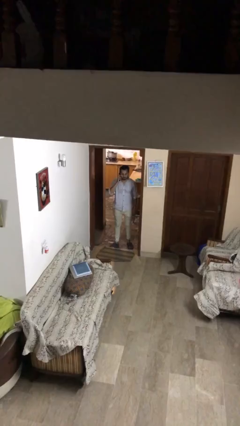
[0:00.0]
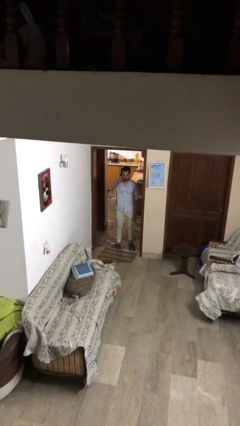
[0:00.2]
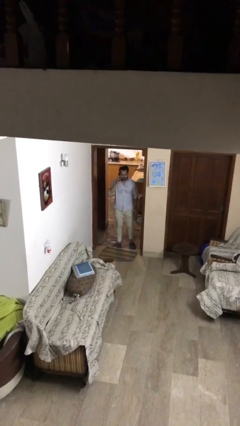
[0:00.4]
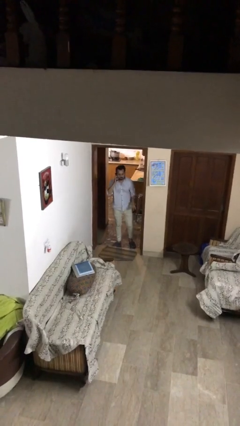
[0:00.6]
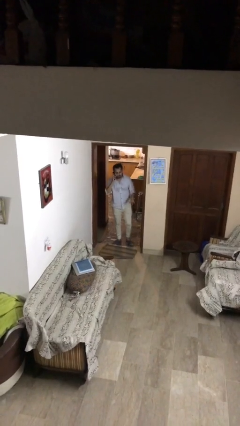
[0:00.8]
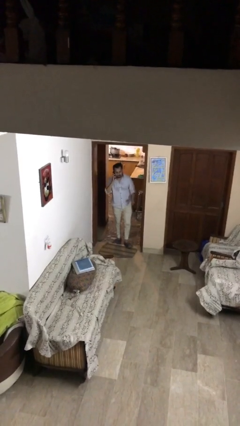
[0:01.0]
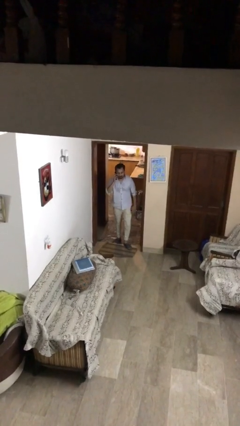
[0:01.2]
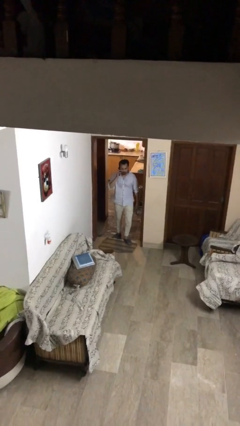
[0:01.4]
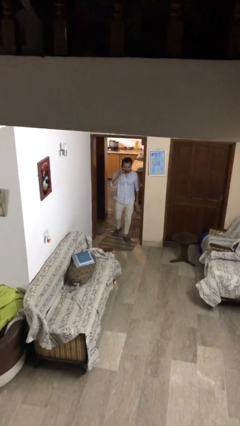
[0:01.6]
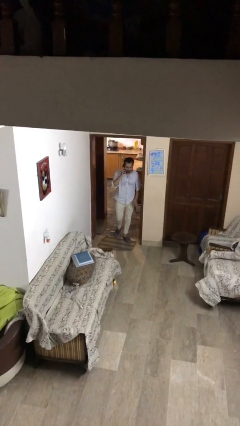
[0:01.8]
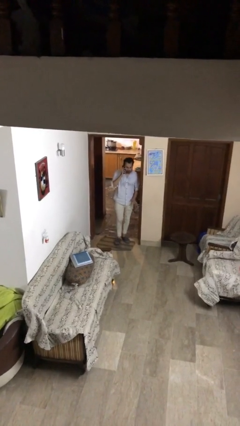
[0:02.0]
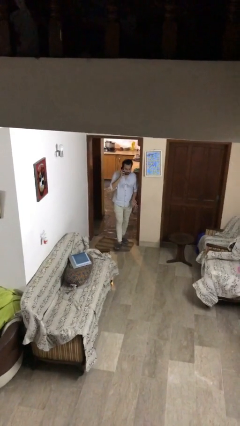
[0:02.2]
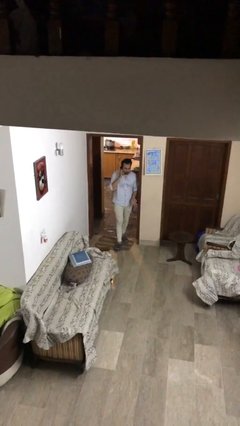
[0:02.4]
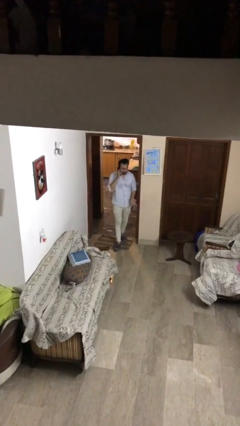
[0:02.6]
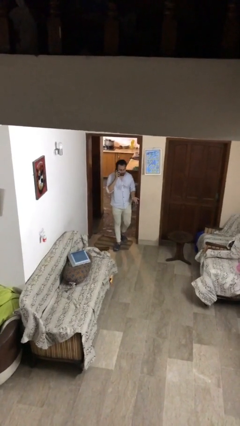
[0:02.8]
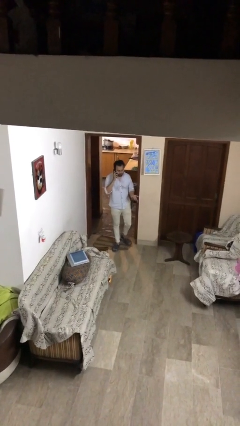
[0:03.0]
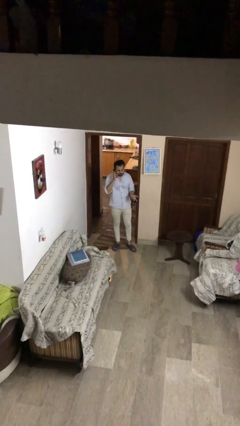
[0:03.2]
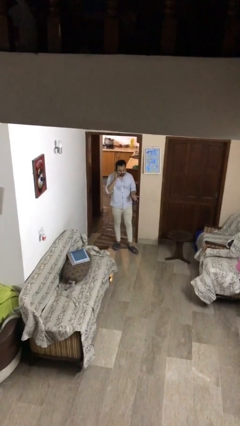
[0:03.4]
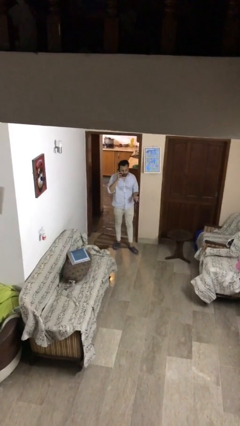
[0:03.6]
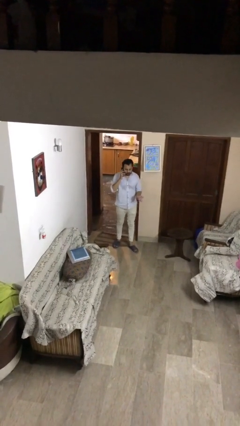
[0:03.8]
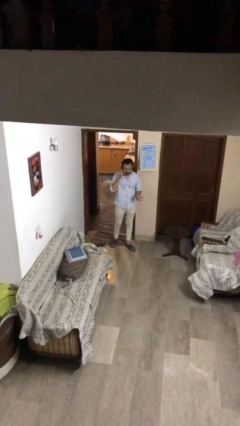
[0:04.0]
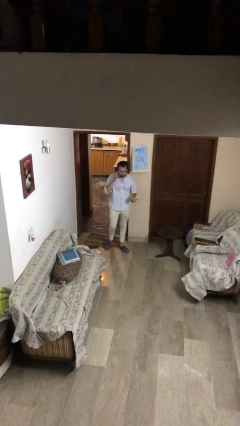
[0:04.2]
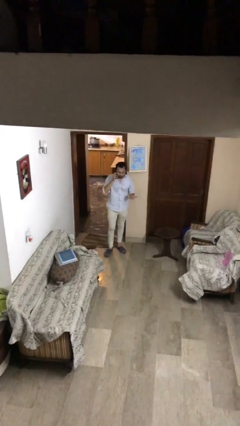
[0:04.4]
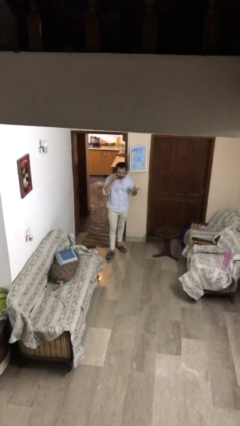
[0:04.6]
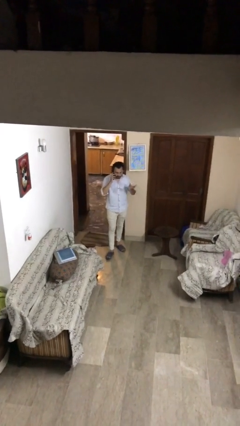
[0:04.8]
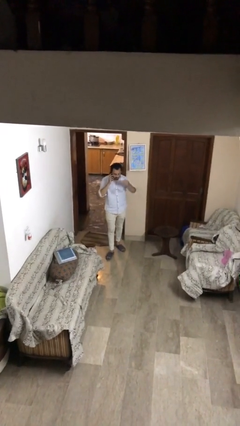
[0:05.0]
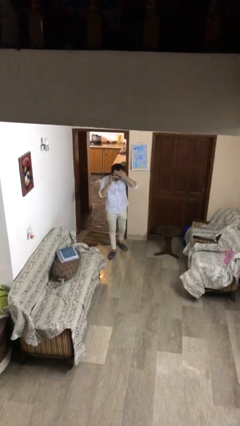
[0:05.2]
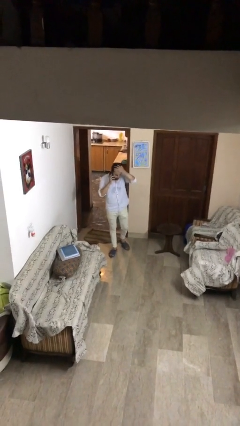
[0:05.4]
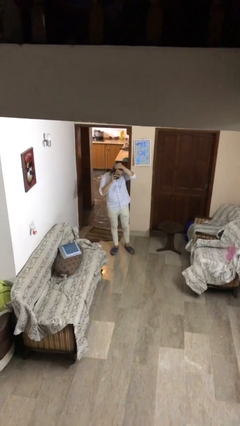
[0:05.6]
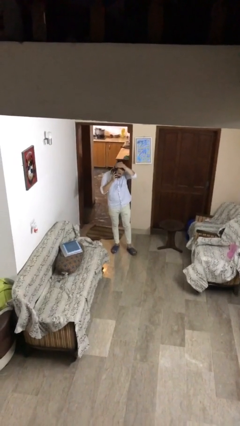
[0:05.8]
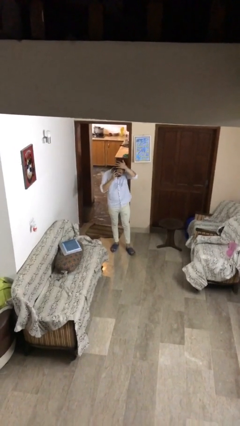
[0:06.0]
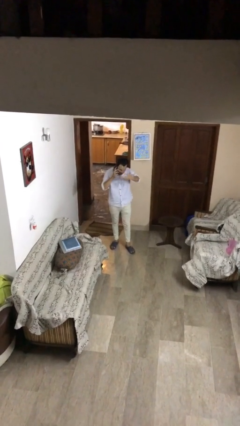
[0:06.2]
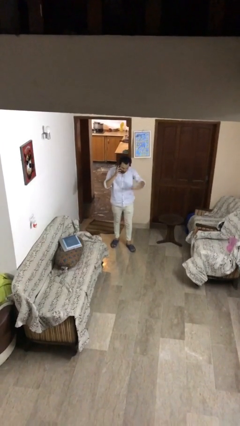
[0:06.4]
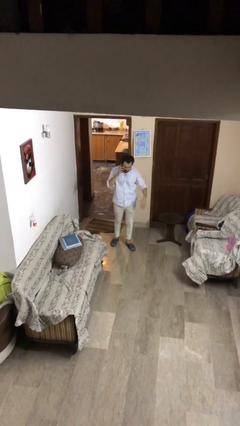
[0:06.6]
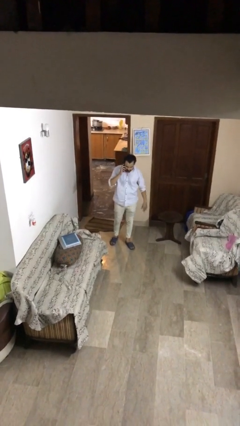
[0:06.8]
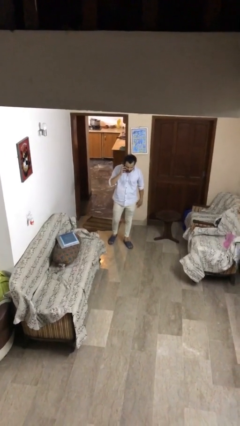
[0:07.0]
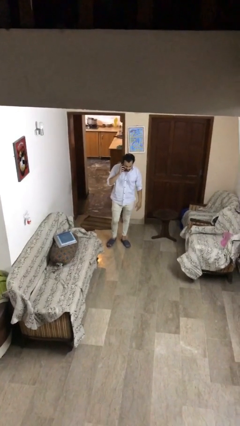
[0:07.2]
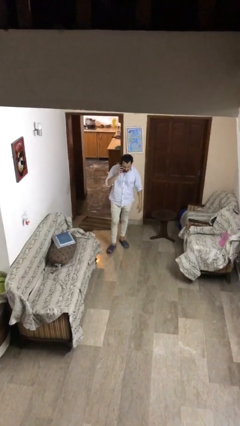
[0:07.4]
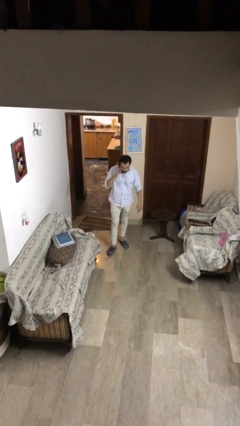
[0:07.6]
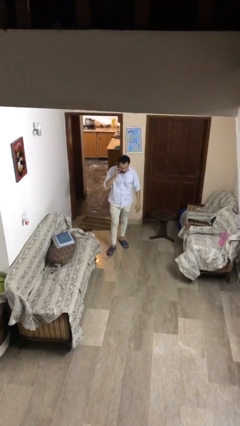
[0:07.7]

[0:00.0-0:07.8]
person enters scene through structure

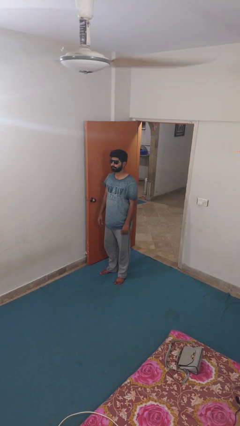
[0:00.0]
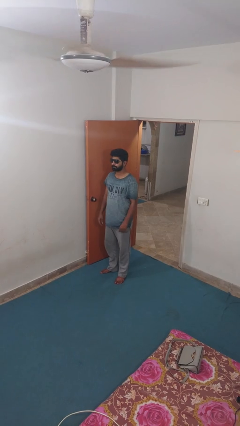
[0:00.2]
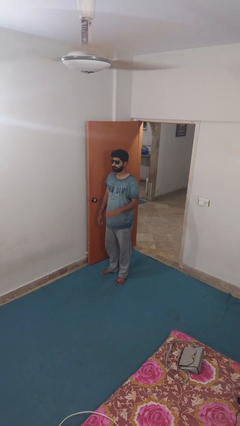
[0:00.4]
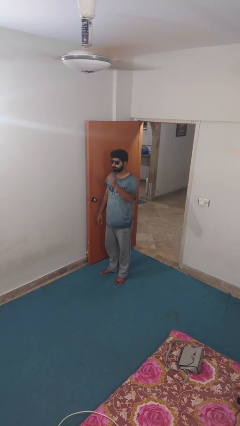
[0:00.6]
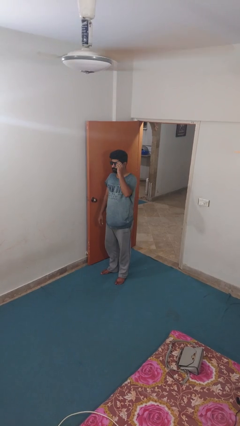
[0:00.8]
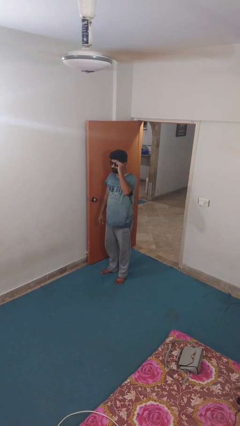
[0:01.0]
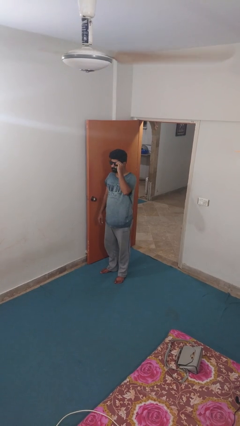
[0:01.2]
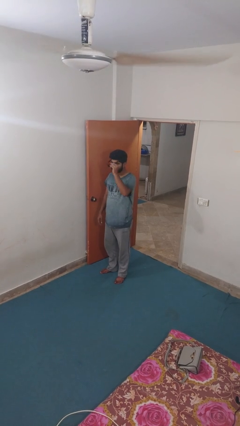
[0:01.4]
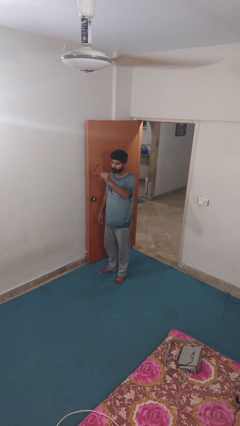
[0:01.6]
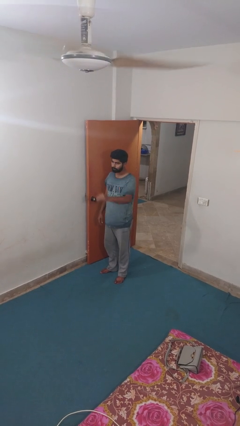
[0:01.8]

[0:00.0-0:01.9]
person takes off sunglasses

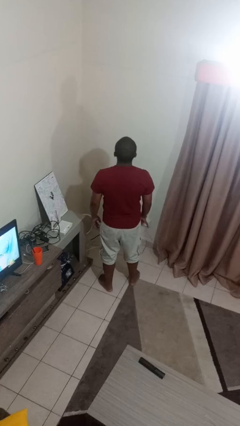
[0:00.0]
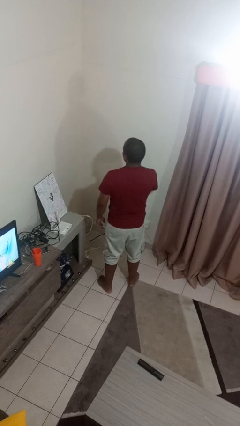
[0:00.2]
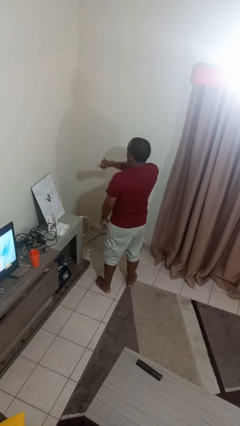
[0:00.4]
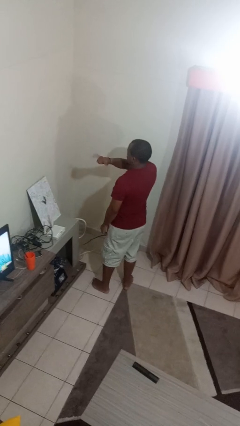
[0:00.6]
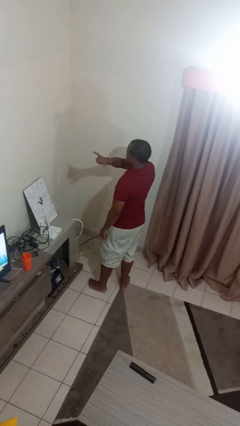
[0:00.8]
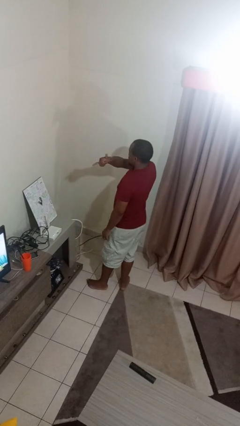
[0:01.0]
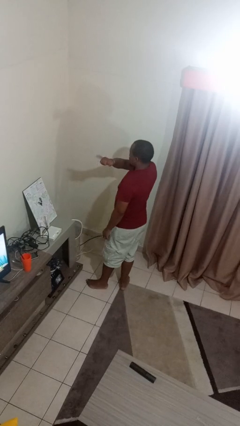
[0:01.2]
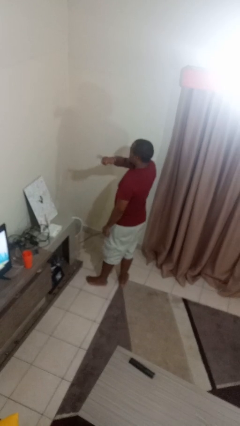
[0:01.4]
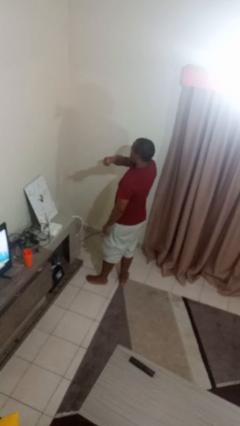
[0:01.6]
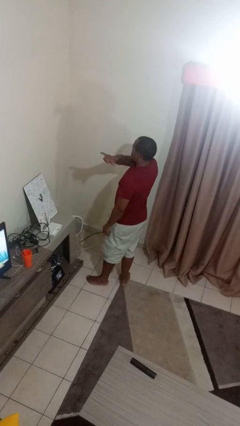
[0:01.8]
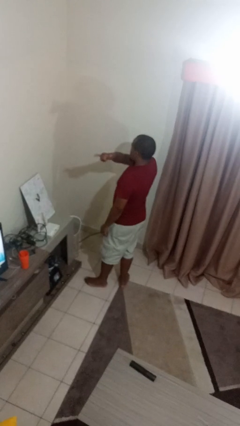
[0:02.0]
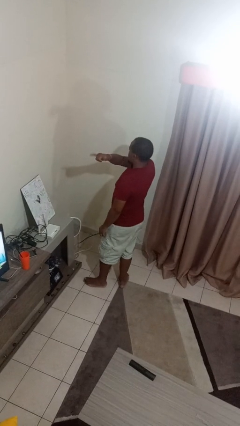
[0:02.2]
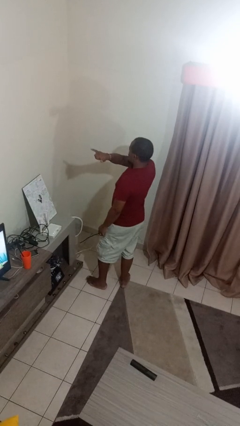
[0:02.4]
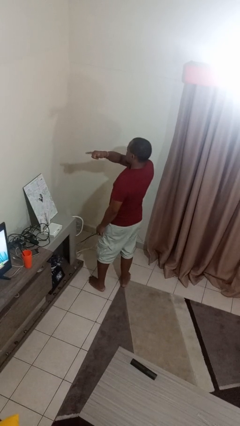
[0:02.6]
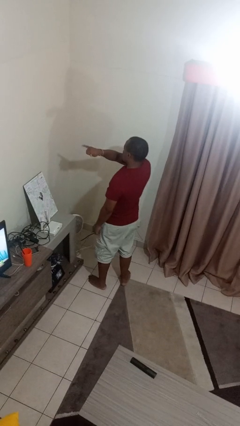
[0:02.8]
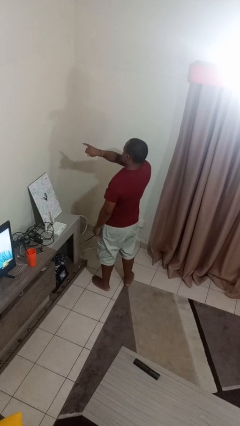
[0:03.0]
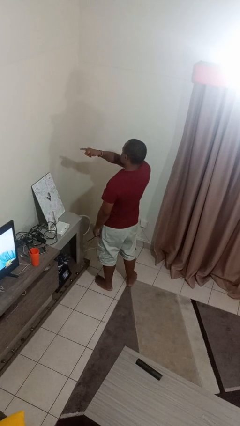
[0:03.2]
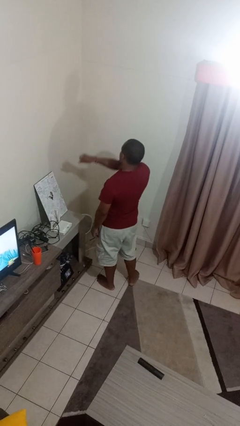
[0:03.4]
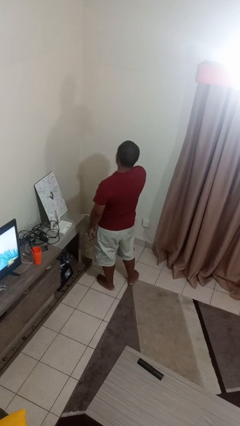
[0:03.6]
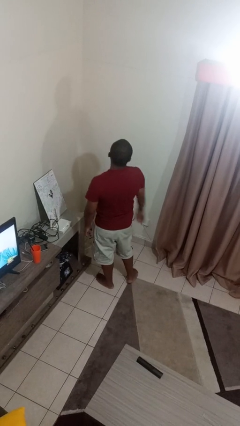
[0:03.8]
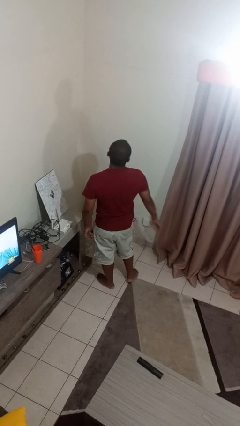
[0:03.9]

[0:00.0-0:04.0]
person gestures hang loose

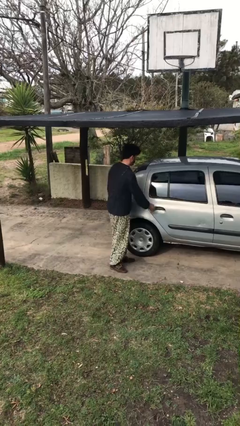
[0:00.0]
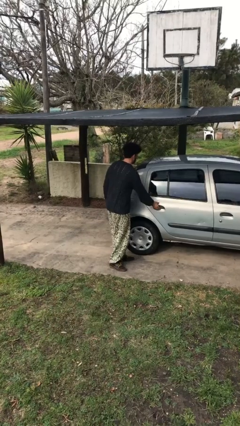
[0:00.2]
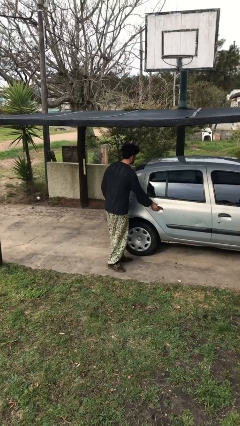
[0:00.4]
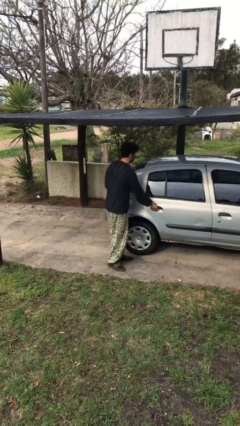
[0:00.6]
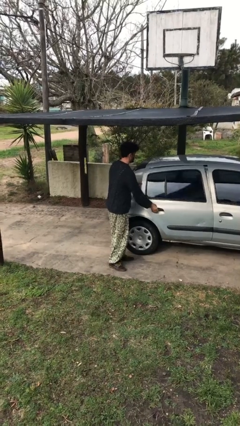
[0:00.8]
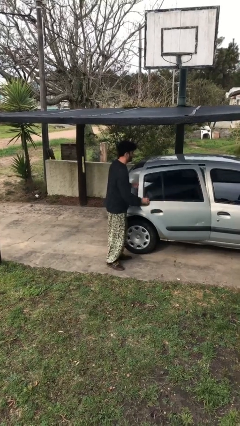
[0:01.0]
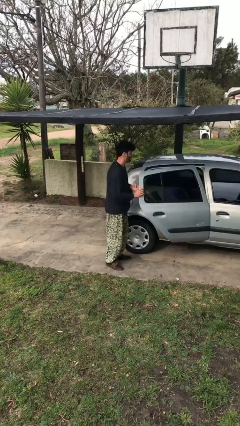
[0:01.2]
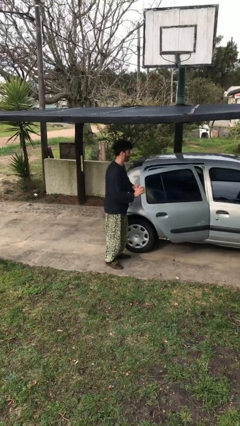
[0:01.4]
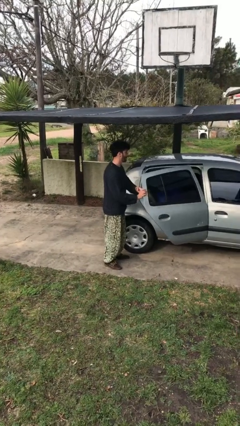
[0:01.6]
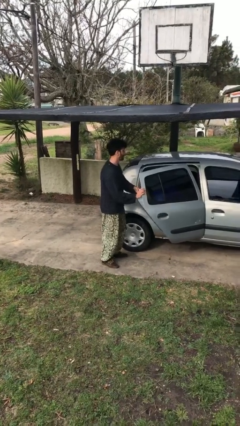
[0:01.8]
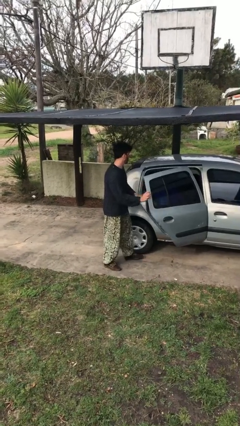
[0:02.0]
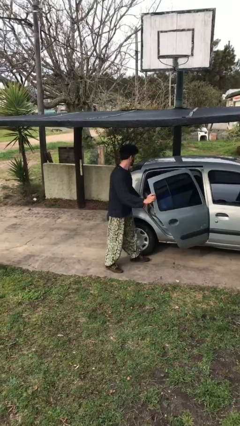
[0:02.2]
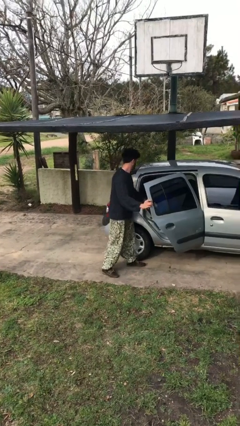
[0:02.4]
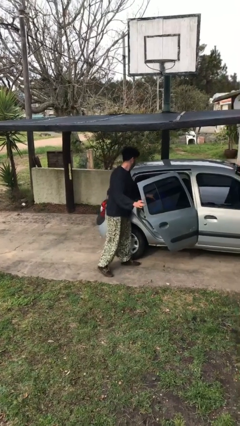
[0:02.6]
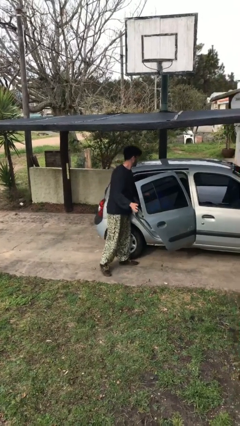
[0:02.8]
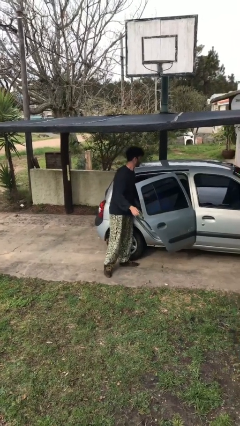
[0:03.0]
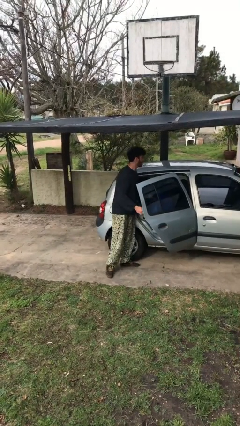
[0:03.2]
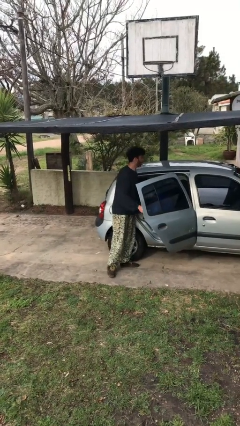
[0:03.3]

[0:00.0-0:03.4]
person opens car door

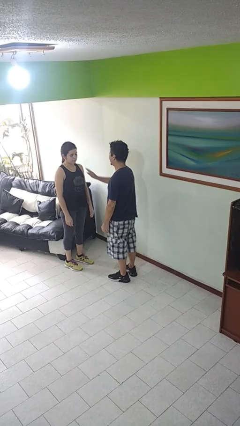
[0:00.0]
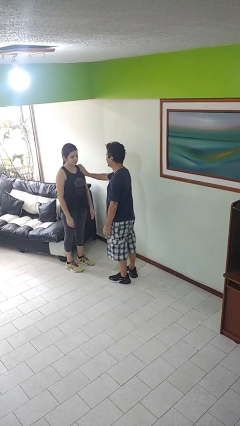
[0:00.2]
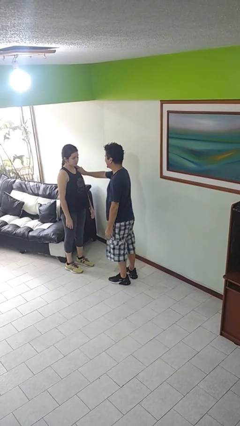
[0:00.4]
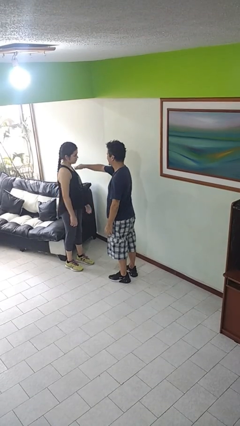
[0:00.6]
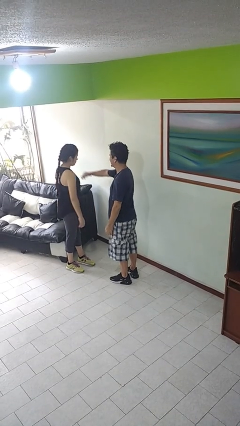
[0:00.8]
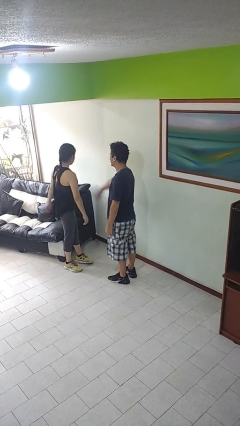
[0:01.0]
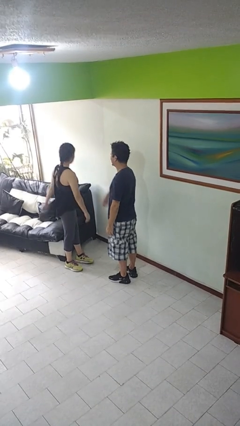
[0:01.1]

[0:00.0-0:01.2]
person shoves person
